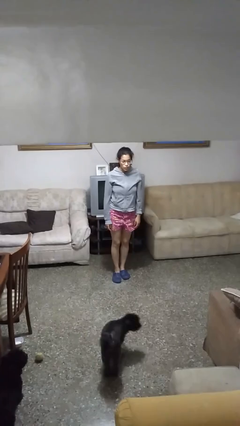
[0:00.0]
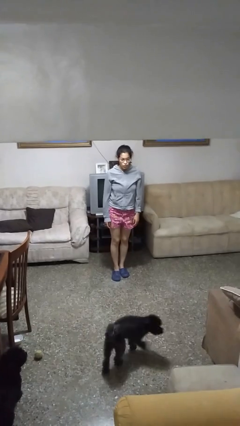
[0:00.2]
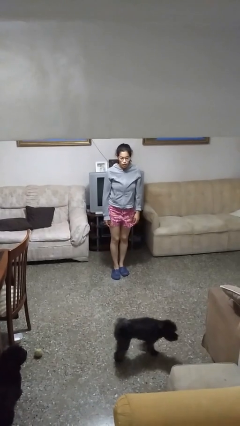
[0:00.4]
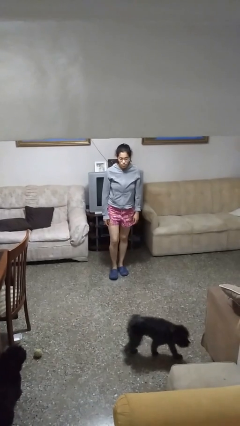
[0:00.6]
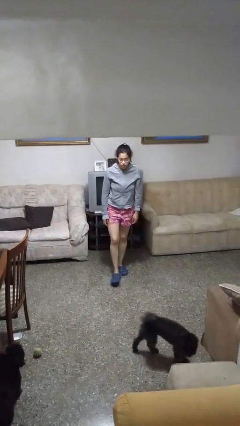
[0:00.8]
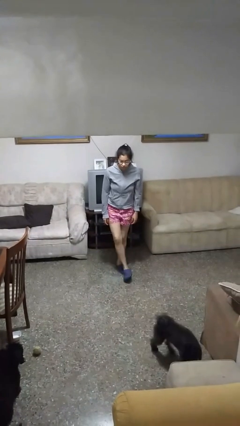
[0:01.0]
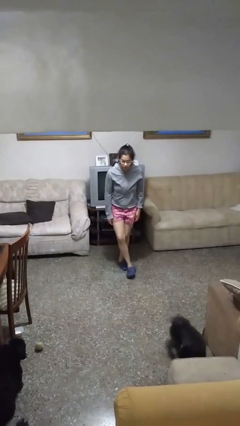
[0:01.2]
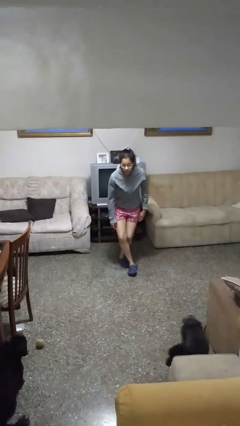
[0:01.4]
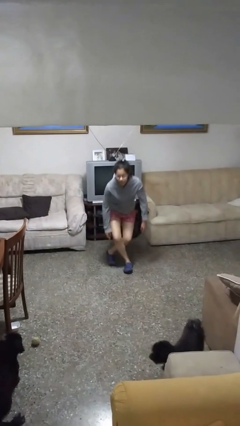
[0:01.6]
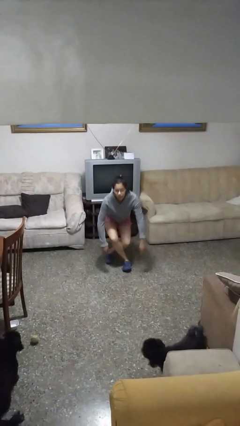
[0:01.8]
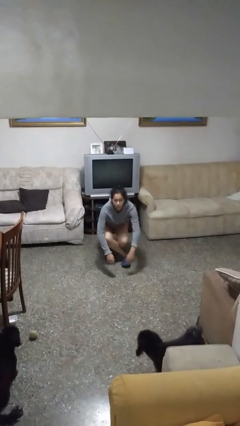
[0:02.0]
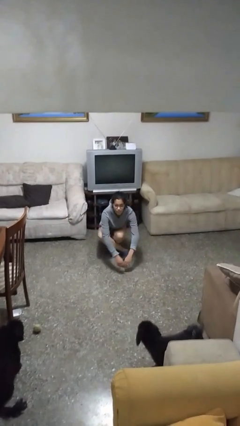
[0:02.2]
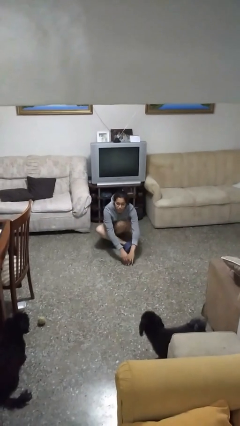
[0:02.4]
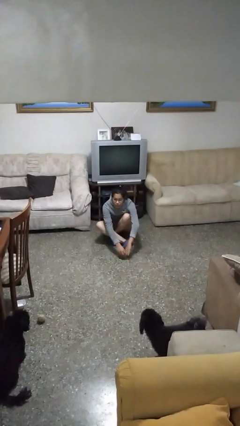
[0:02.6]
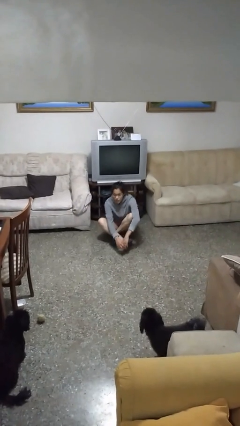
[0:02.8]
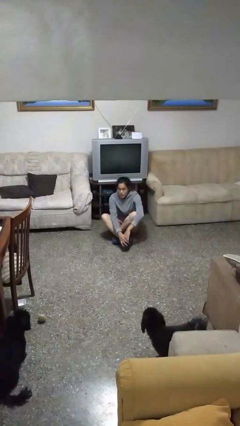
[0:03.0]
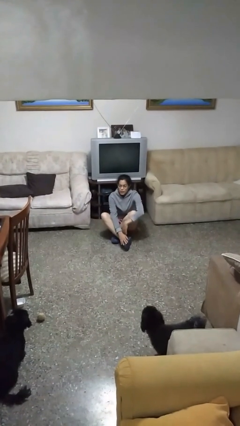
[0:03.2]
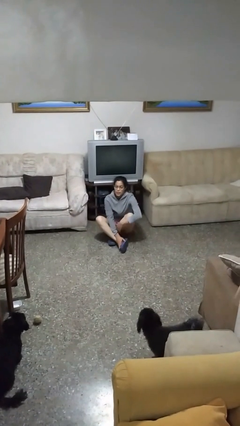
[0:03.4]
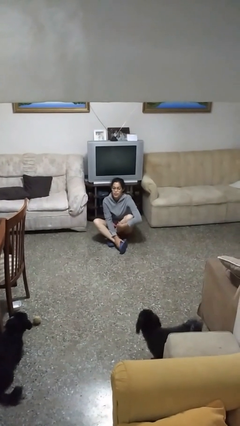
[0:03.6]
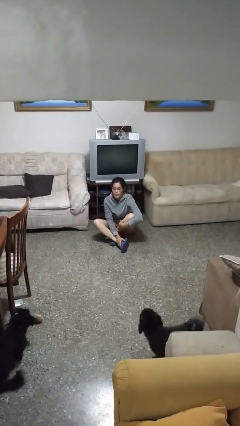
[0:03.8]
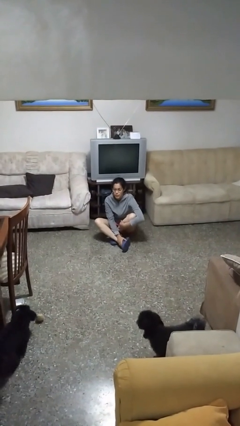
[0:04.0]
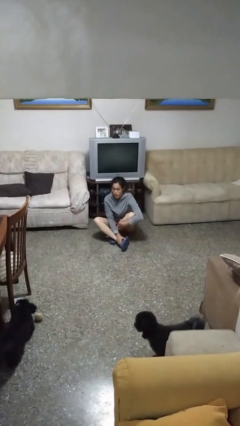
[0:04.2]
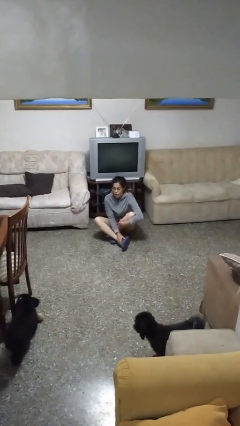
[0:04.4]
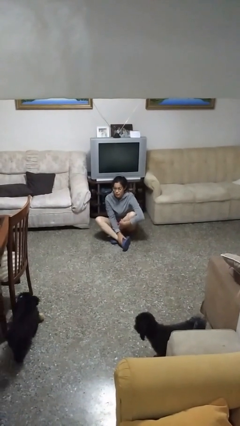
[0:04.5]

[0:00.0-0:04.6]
person sits crisscross

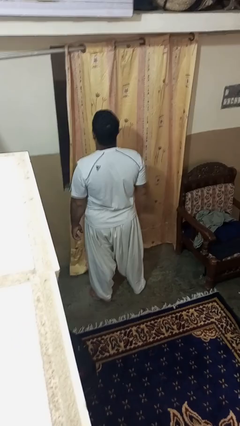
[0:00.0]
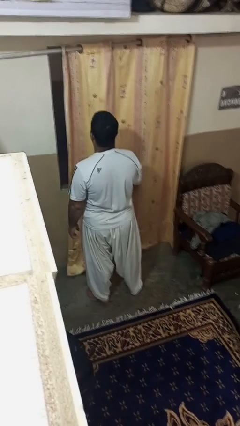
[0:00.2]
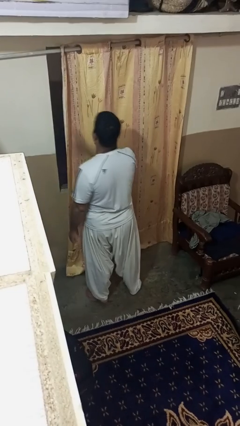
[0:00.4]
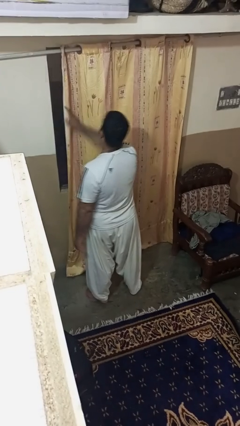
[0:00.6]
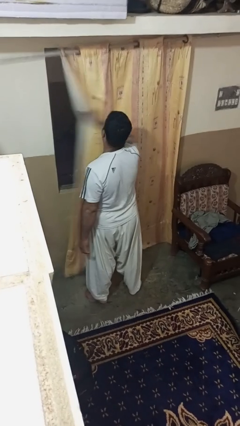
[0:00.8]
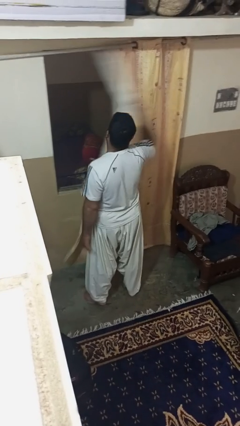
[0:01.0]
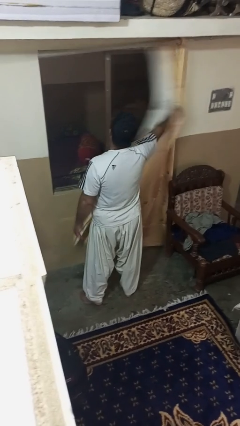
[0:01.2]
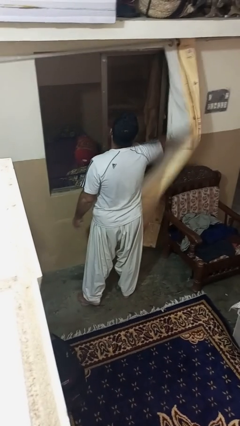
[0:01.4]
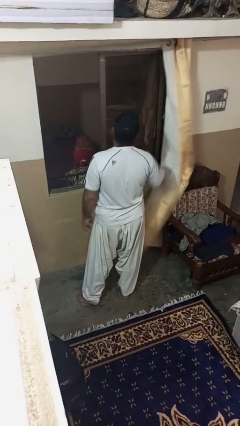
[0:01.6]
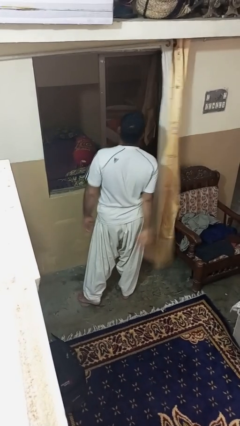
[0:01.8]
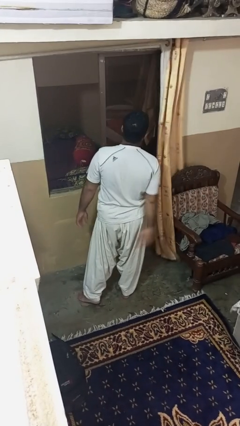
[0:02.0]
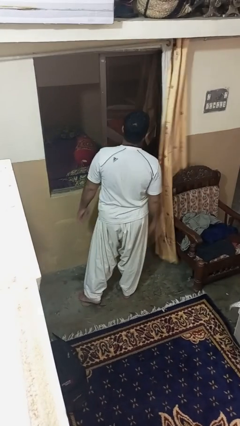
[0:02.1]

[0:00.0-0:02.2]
person opens curtains

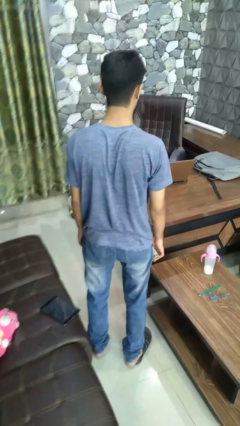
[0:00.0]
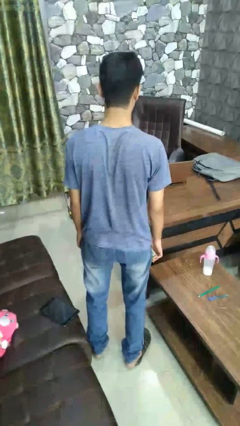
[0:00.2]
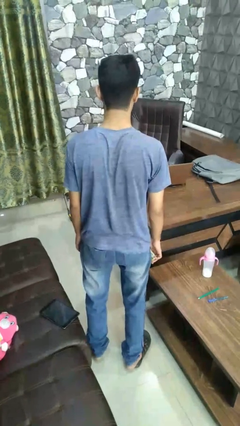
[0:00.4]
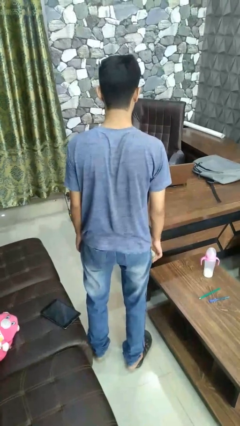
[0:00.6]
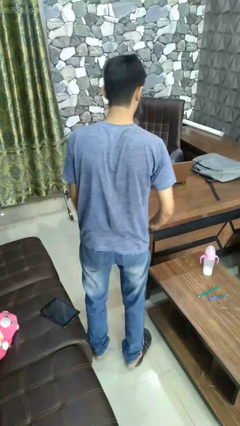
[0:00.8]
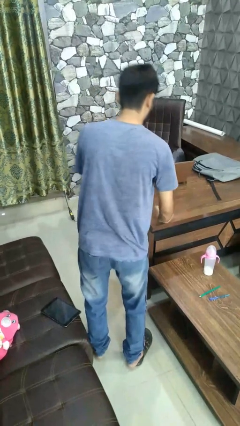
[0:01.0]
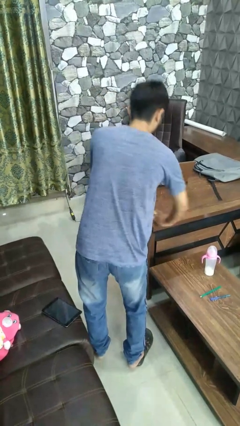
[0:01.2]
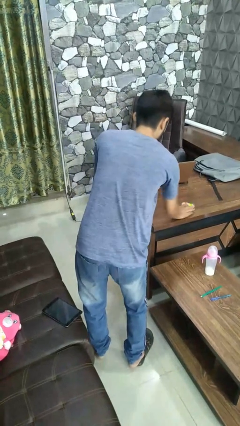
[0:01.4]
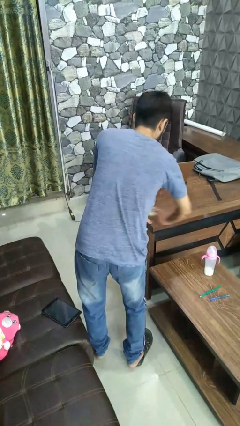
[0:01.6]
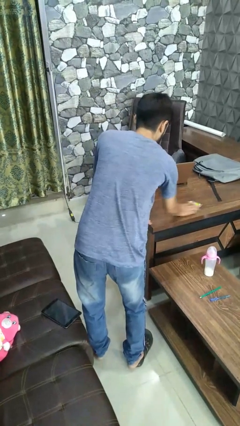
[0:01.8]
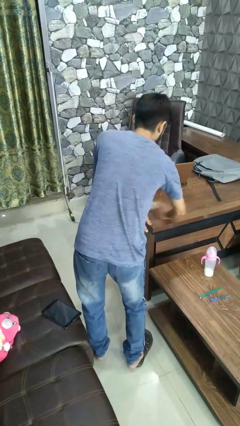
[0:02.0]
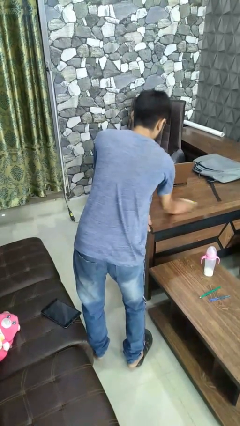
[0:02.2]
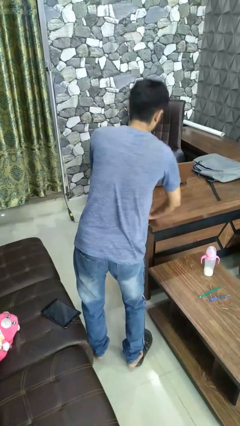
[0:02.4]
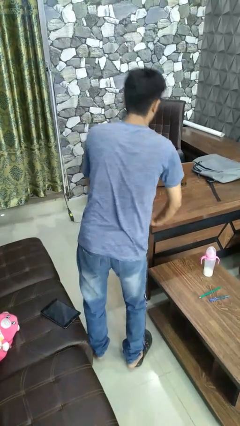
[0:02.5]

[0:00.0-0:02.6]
person dusts furniture

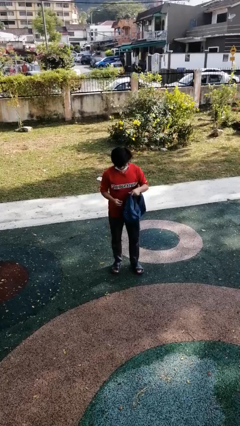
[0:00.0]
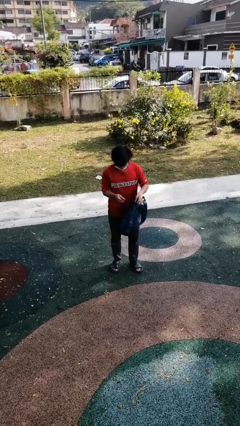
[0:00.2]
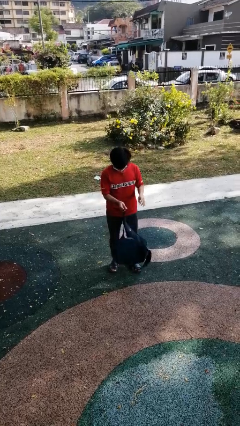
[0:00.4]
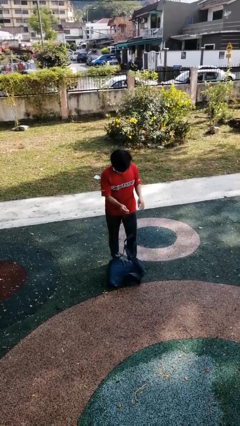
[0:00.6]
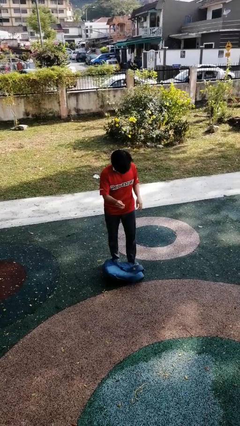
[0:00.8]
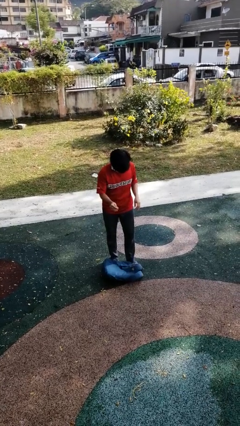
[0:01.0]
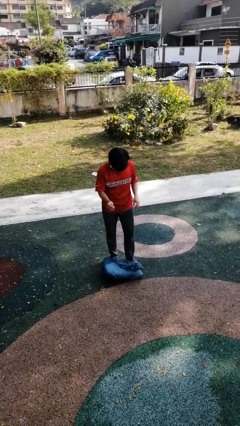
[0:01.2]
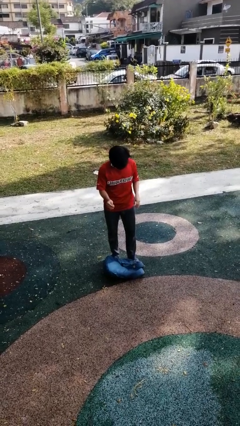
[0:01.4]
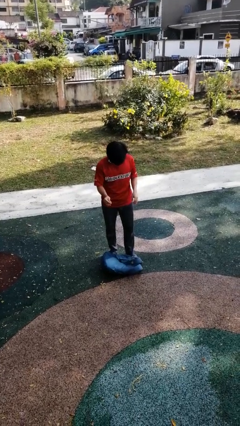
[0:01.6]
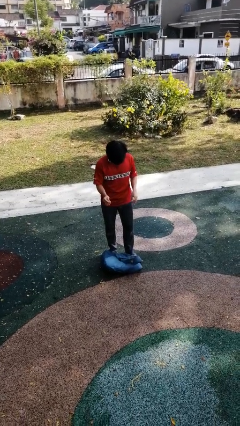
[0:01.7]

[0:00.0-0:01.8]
person drops object

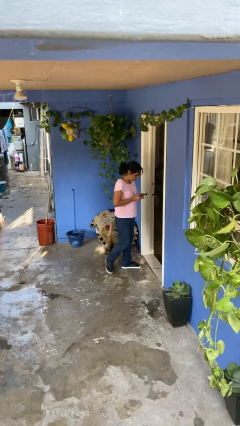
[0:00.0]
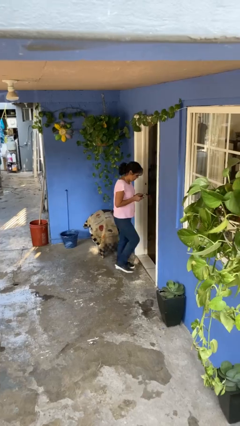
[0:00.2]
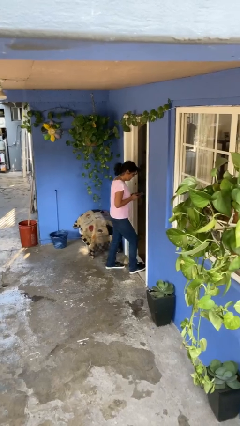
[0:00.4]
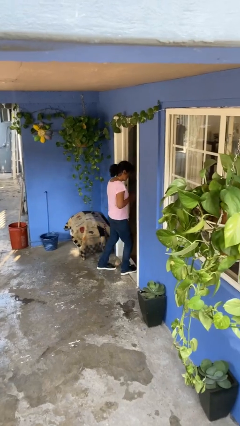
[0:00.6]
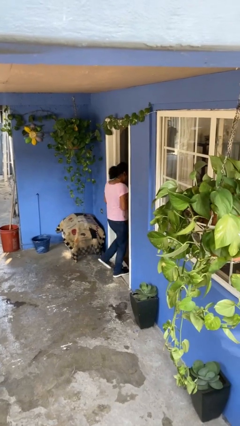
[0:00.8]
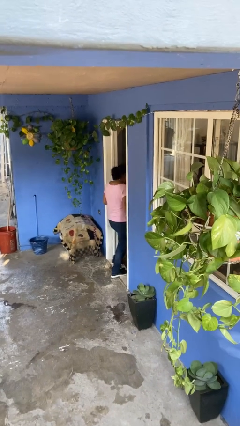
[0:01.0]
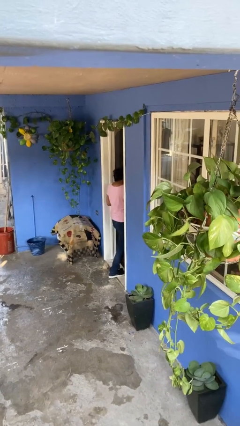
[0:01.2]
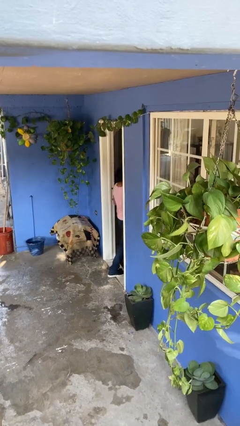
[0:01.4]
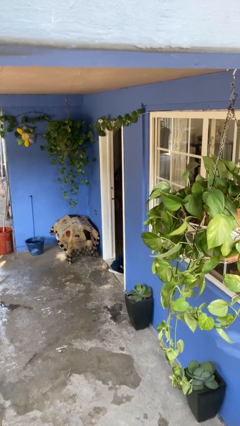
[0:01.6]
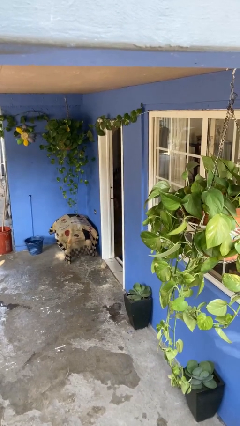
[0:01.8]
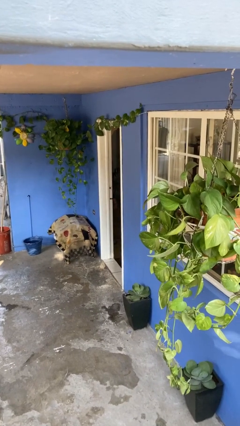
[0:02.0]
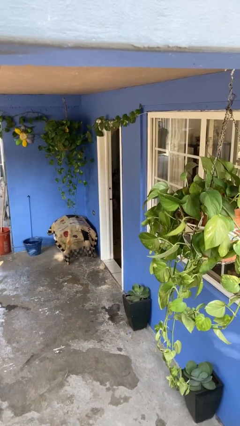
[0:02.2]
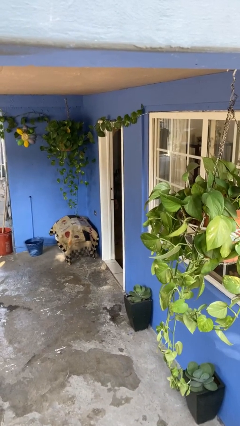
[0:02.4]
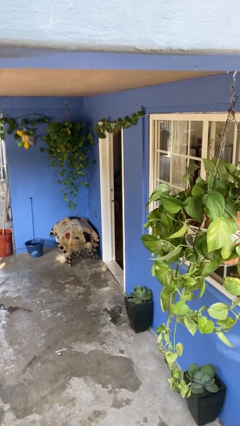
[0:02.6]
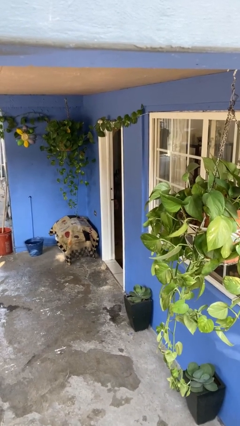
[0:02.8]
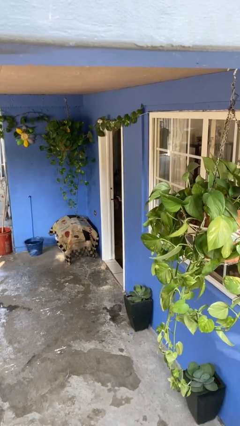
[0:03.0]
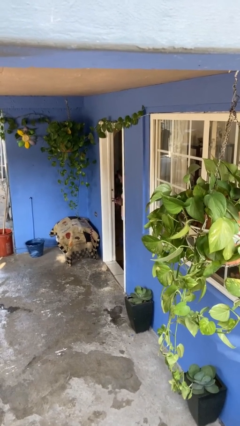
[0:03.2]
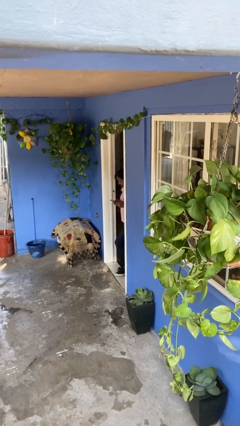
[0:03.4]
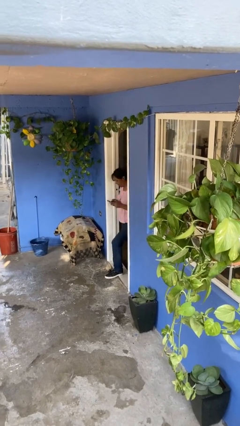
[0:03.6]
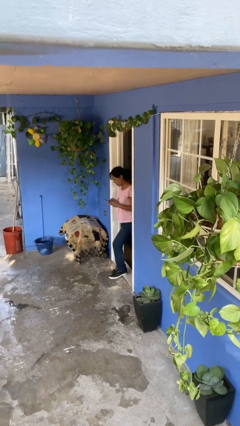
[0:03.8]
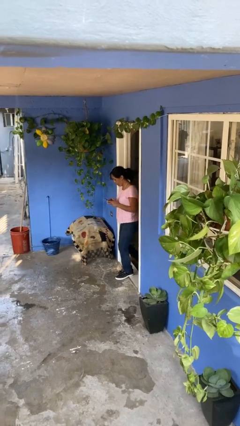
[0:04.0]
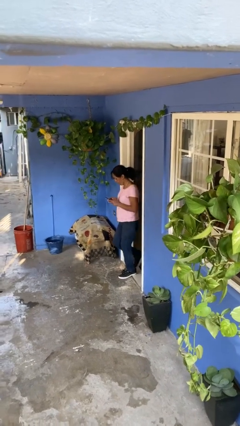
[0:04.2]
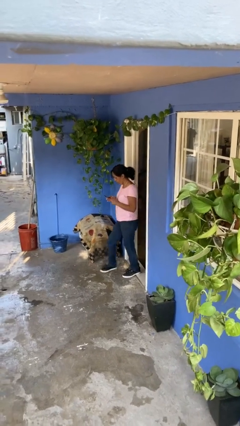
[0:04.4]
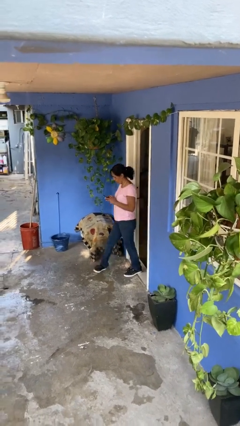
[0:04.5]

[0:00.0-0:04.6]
person enters scene through structure

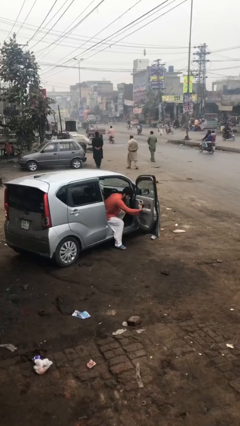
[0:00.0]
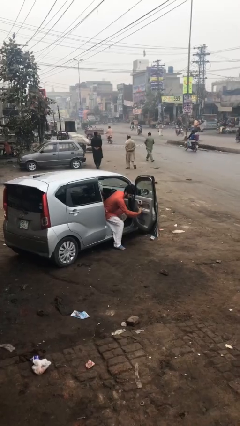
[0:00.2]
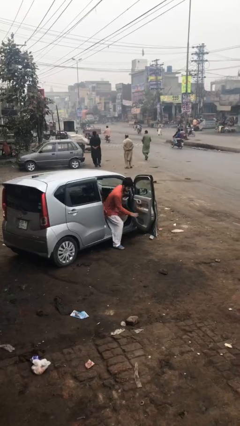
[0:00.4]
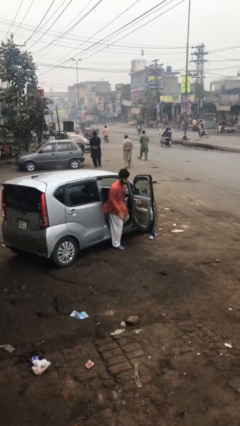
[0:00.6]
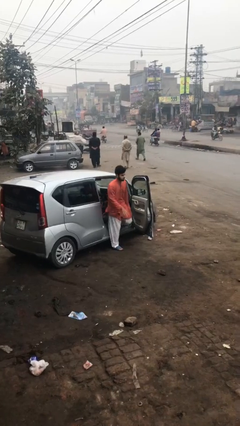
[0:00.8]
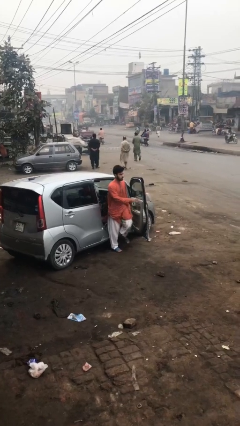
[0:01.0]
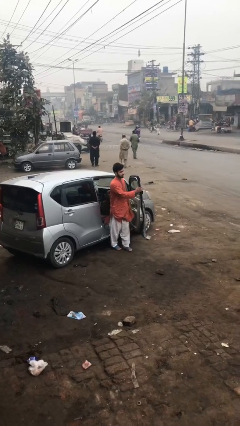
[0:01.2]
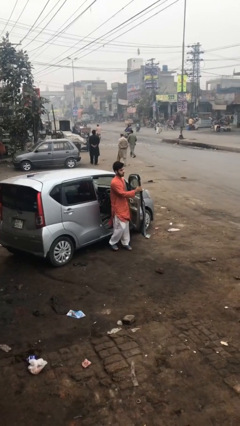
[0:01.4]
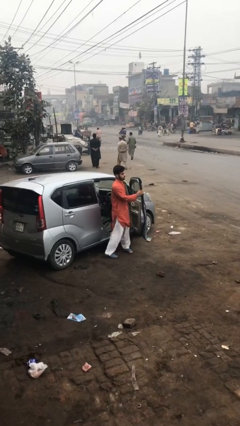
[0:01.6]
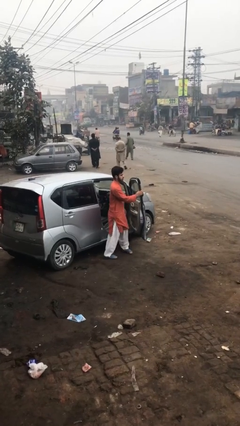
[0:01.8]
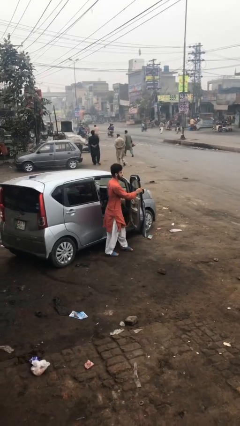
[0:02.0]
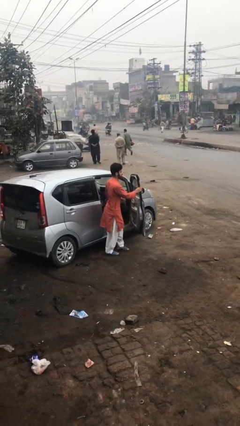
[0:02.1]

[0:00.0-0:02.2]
person exits car
